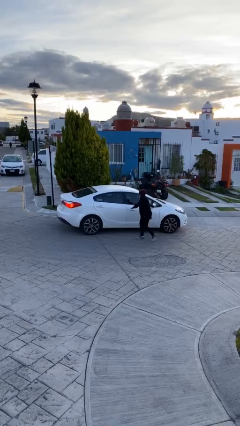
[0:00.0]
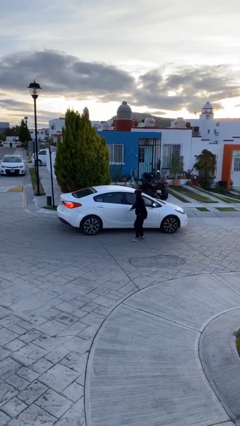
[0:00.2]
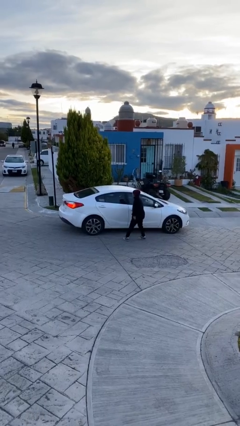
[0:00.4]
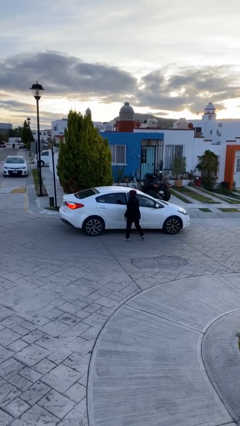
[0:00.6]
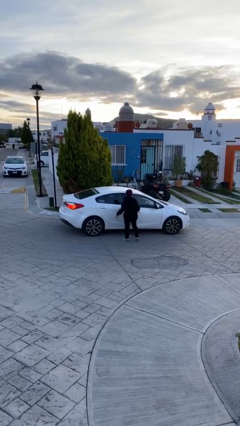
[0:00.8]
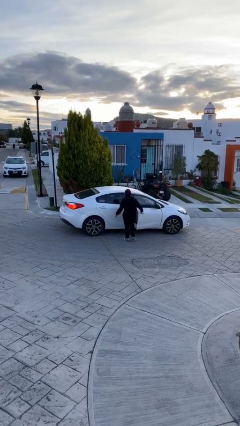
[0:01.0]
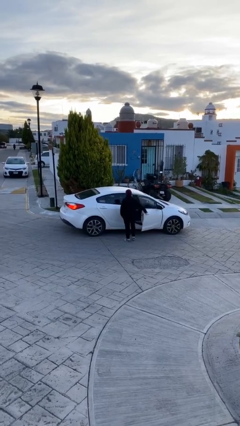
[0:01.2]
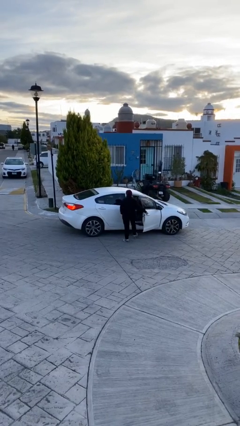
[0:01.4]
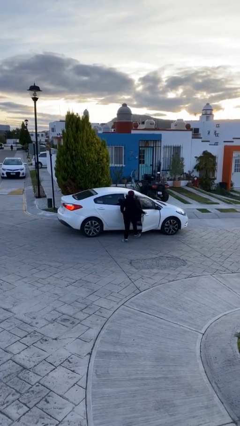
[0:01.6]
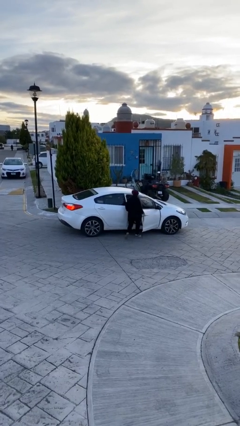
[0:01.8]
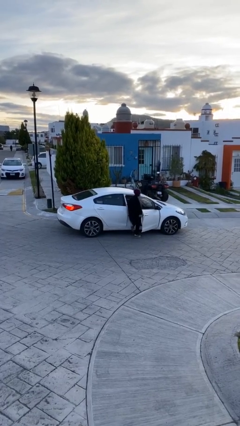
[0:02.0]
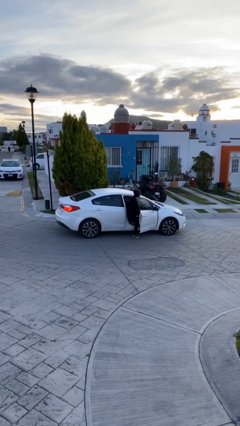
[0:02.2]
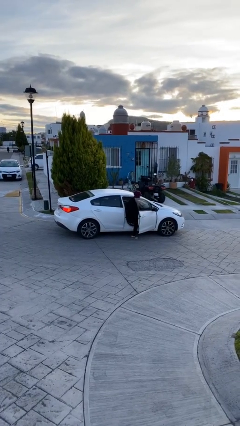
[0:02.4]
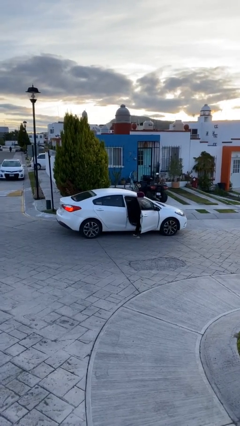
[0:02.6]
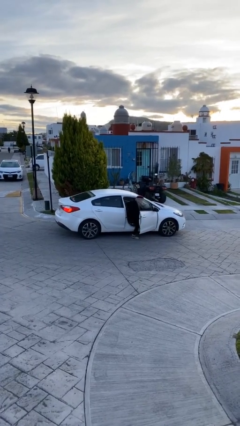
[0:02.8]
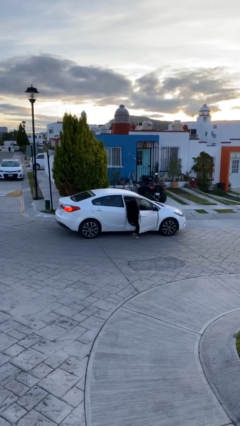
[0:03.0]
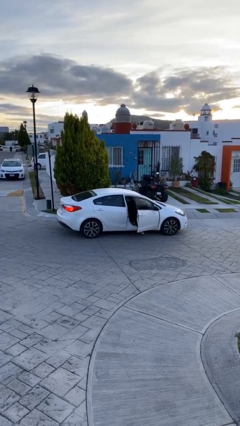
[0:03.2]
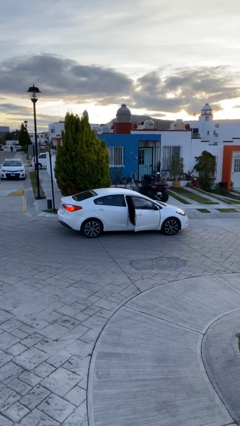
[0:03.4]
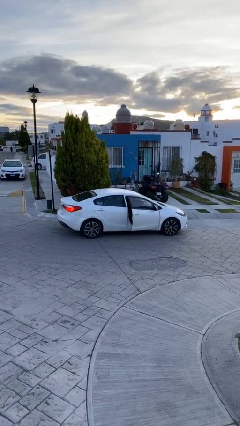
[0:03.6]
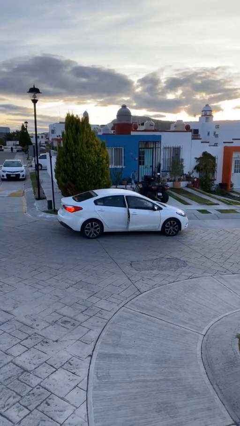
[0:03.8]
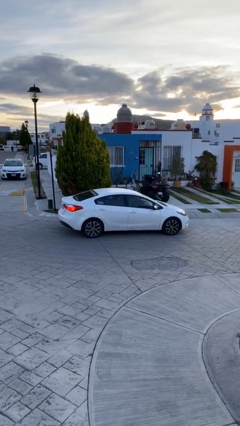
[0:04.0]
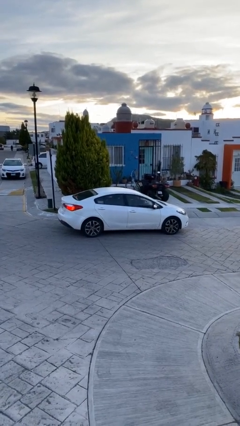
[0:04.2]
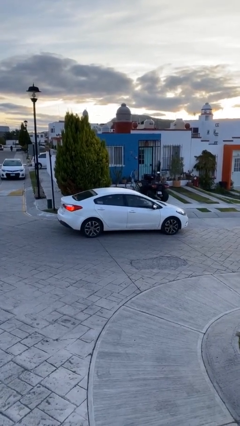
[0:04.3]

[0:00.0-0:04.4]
car picks up person

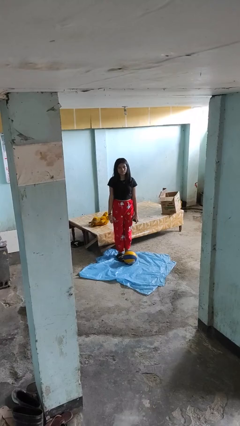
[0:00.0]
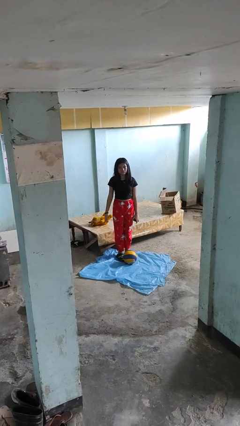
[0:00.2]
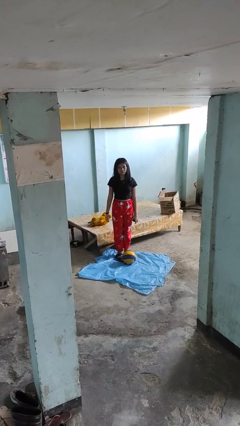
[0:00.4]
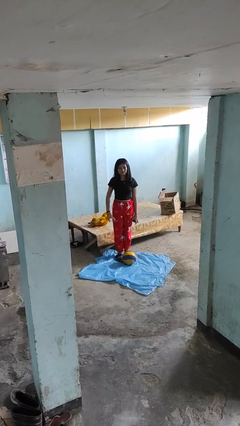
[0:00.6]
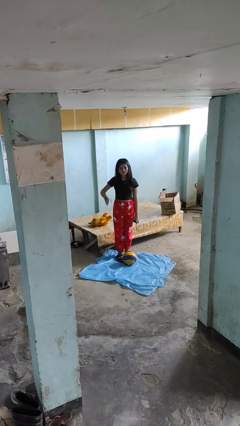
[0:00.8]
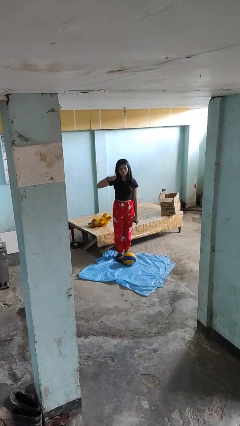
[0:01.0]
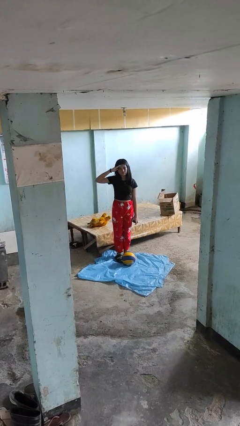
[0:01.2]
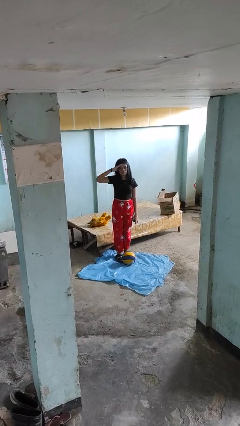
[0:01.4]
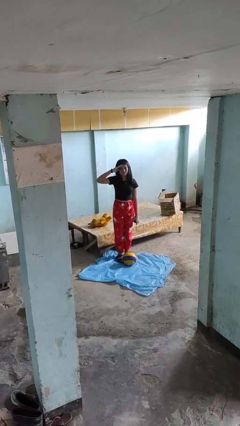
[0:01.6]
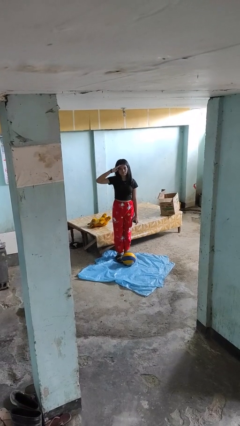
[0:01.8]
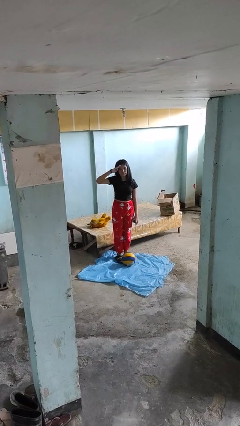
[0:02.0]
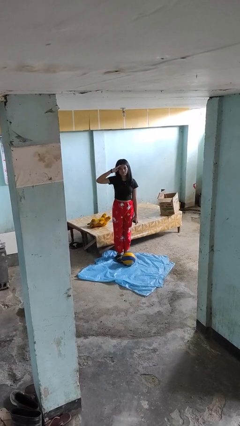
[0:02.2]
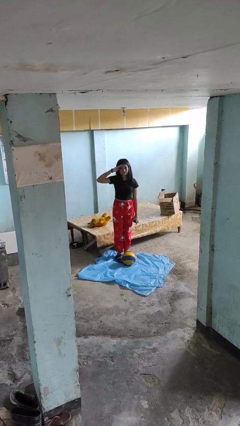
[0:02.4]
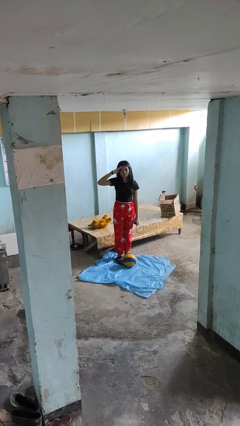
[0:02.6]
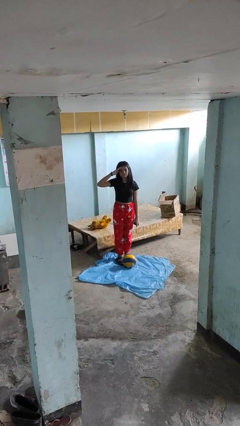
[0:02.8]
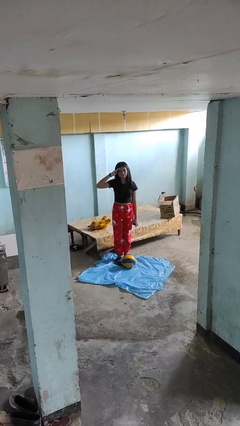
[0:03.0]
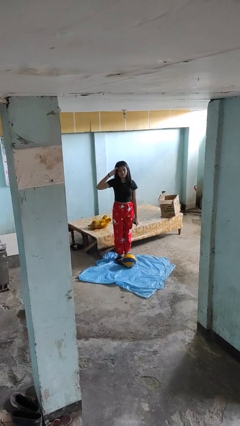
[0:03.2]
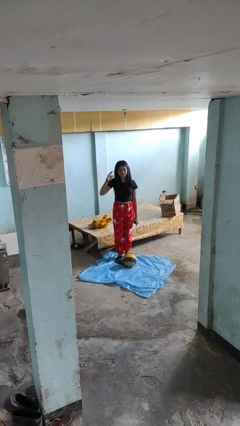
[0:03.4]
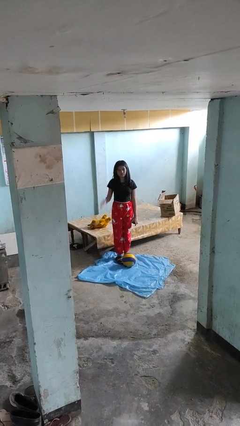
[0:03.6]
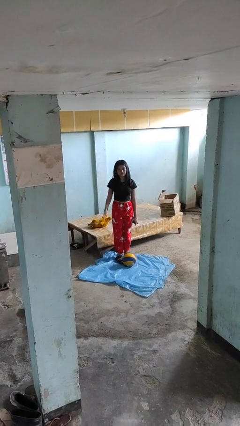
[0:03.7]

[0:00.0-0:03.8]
person salutes

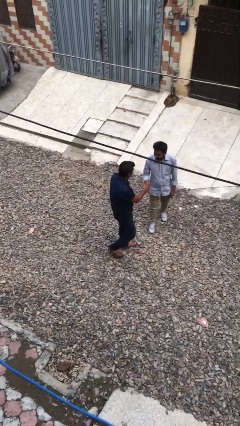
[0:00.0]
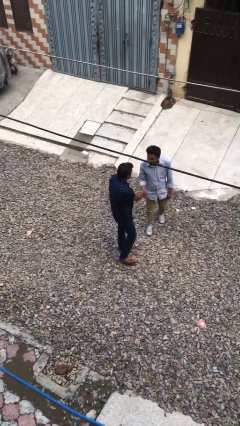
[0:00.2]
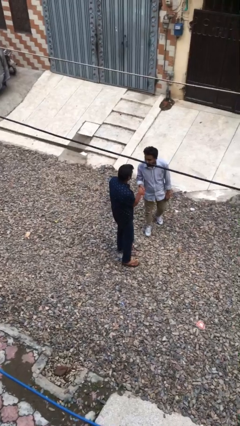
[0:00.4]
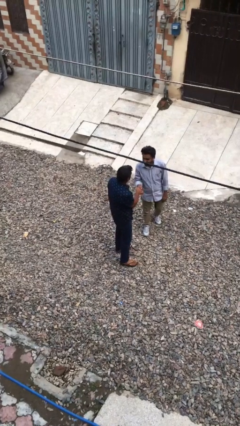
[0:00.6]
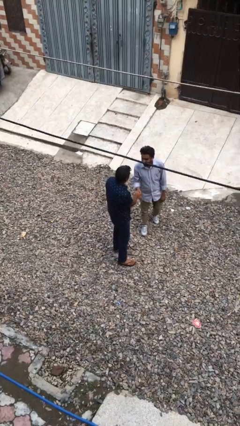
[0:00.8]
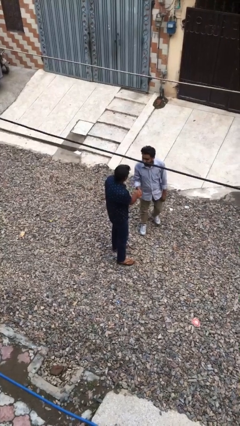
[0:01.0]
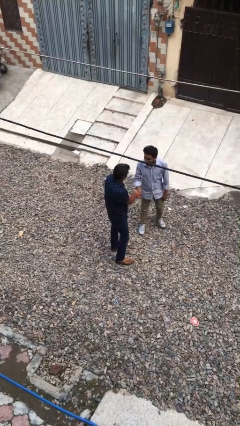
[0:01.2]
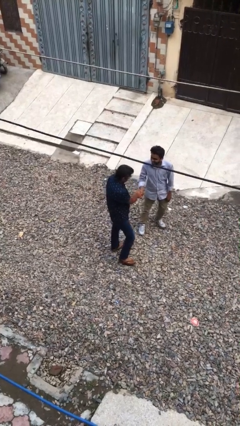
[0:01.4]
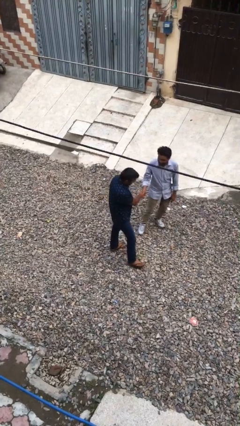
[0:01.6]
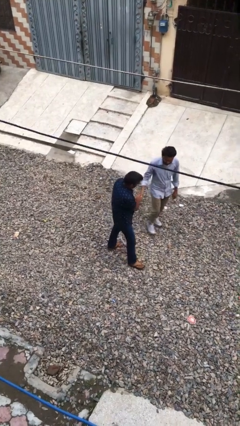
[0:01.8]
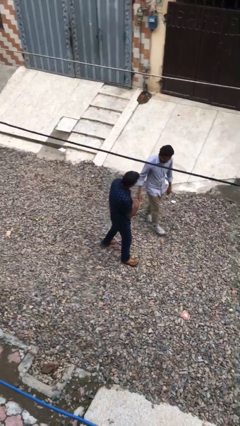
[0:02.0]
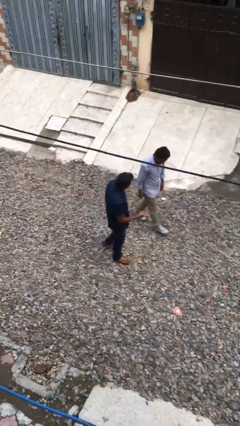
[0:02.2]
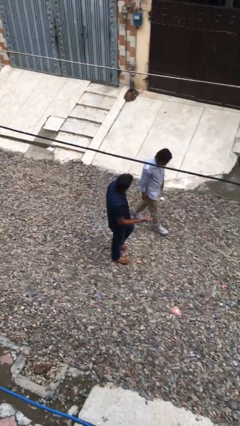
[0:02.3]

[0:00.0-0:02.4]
person shakes hand

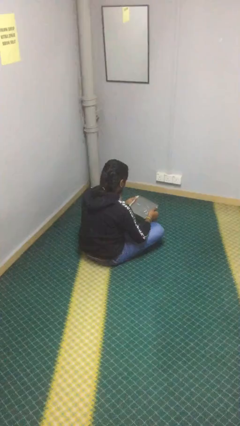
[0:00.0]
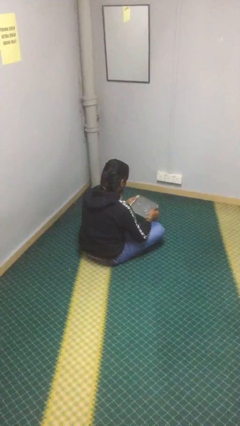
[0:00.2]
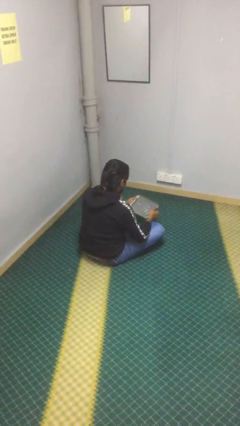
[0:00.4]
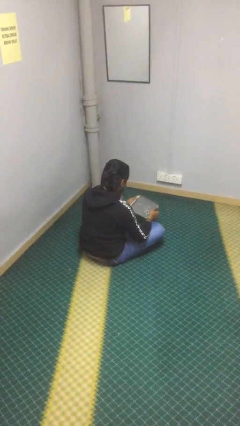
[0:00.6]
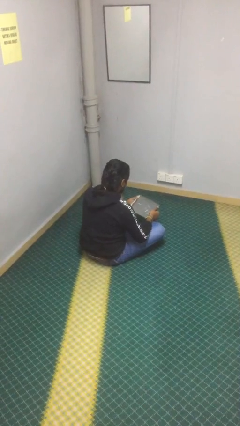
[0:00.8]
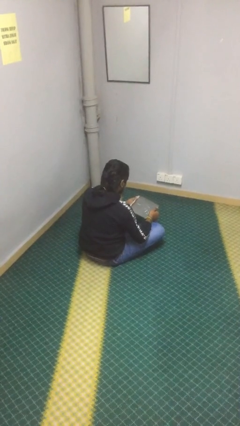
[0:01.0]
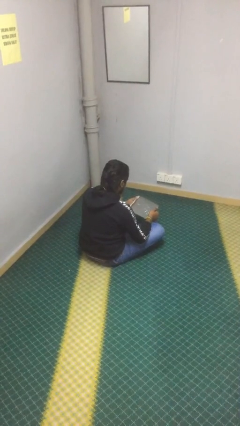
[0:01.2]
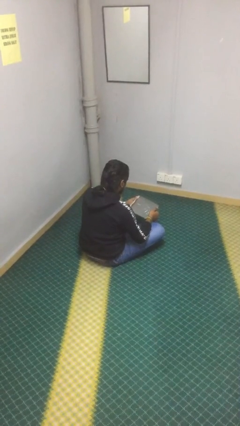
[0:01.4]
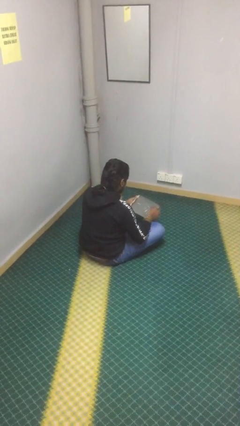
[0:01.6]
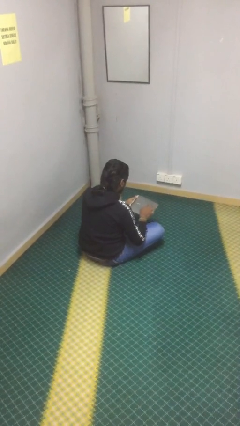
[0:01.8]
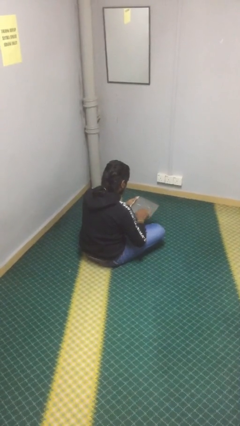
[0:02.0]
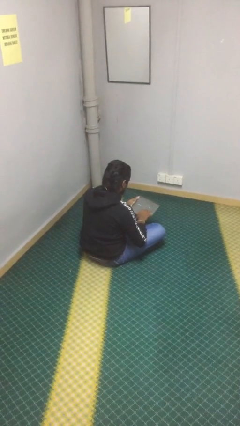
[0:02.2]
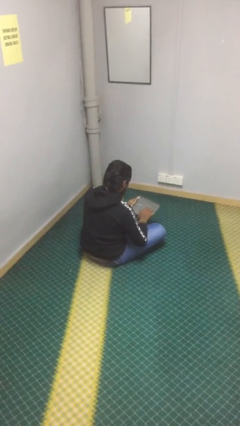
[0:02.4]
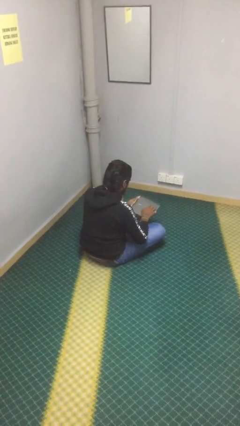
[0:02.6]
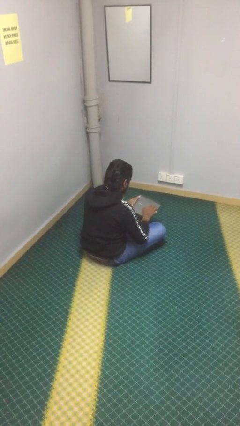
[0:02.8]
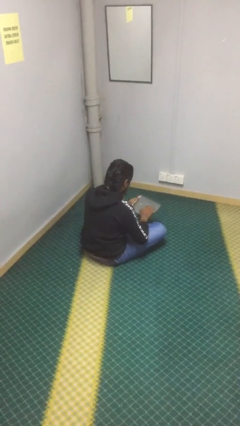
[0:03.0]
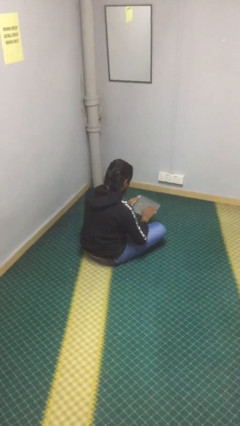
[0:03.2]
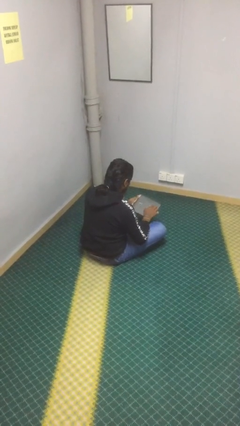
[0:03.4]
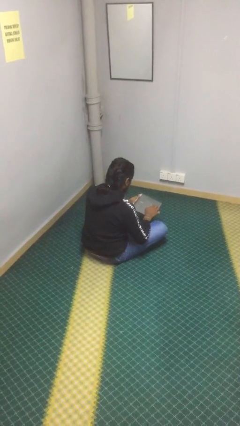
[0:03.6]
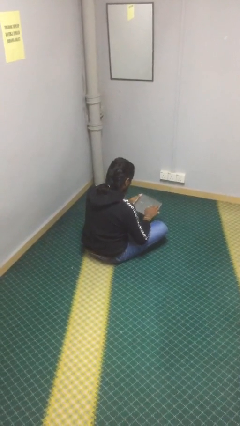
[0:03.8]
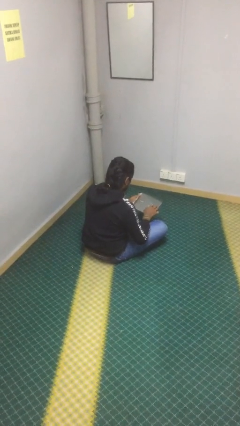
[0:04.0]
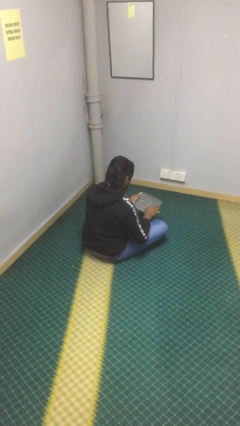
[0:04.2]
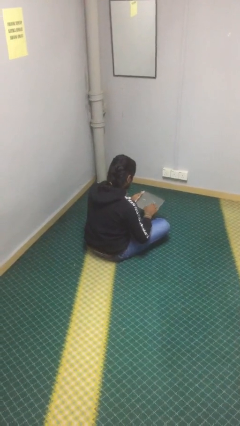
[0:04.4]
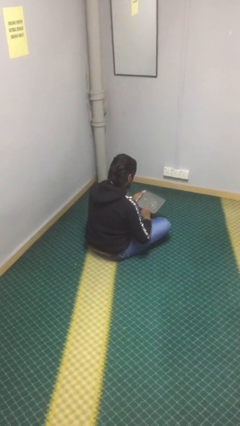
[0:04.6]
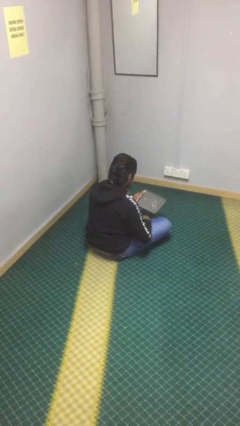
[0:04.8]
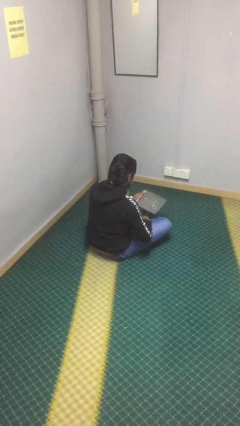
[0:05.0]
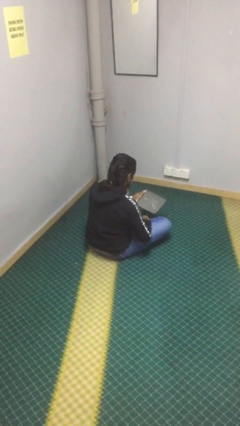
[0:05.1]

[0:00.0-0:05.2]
person interacts with tablet

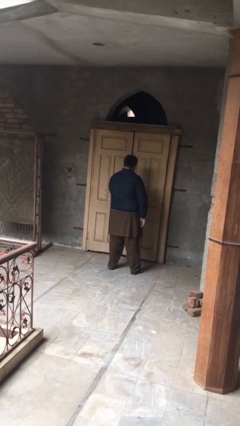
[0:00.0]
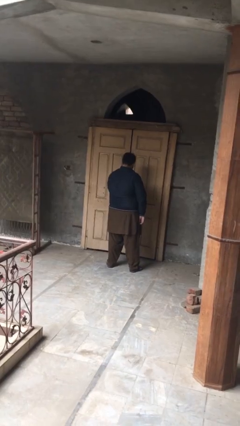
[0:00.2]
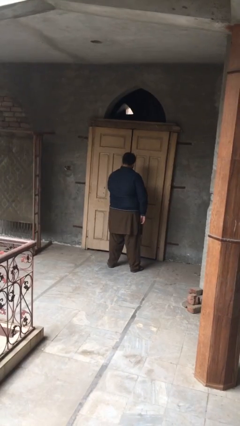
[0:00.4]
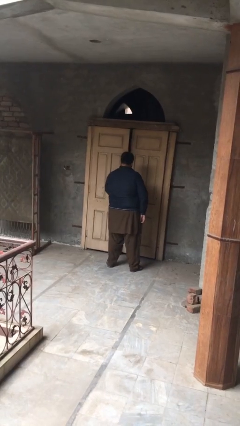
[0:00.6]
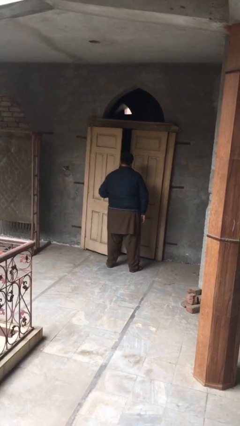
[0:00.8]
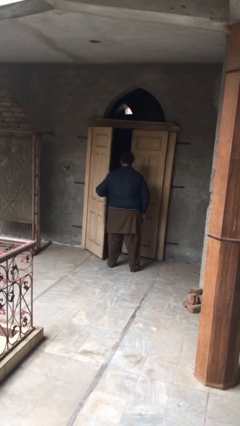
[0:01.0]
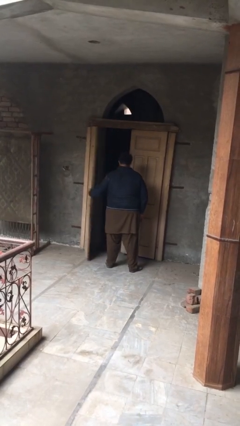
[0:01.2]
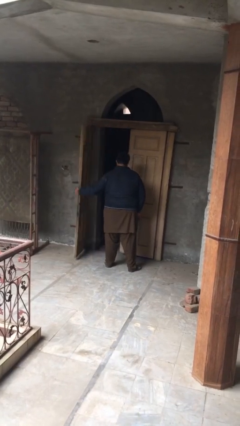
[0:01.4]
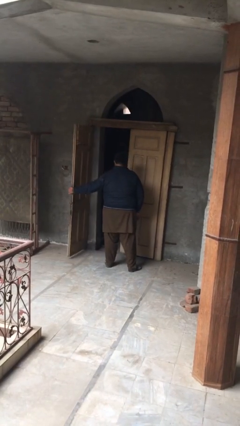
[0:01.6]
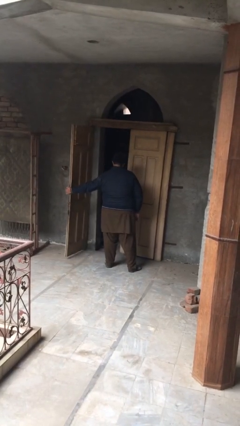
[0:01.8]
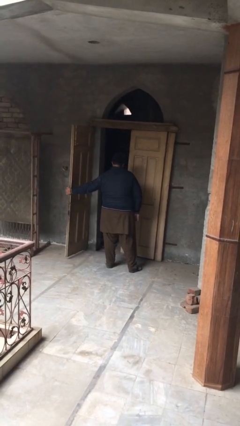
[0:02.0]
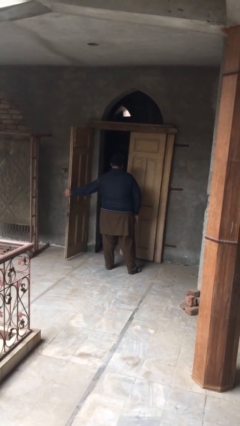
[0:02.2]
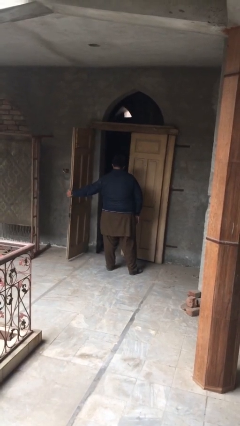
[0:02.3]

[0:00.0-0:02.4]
person opens facility door
